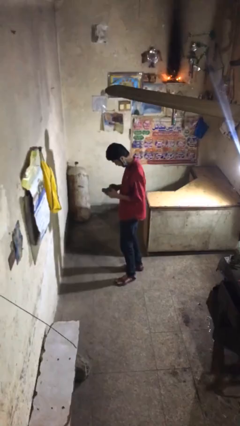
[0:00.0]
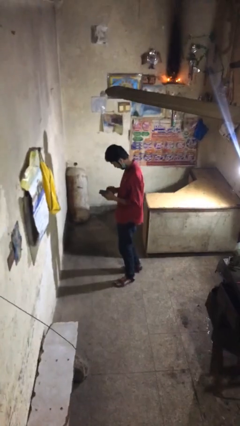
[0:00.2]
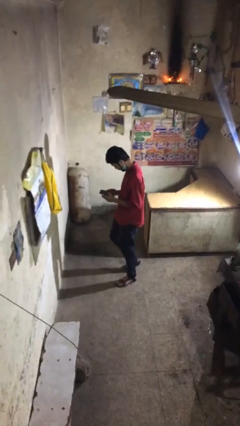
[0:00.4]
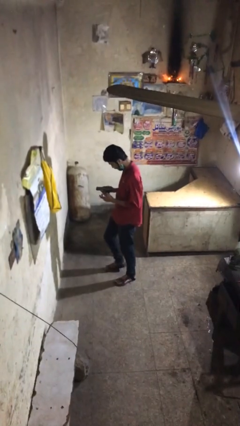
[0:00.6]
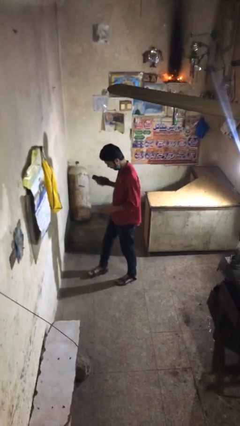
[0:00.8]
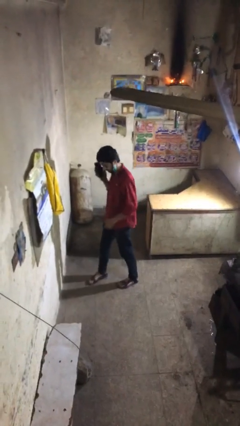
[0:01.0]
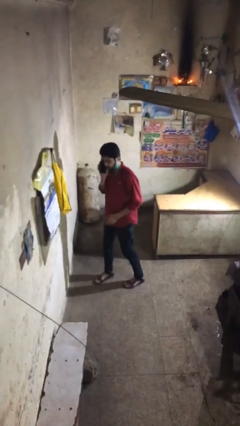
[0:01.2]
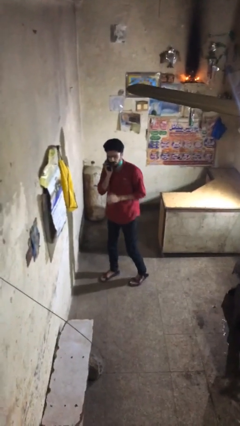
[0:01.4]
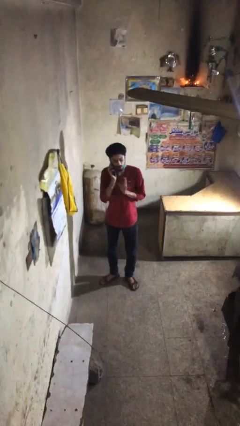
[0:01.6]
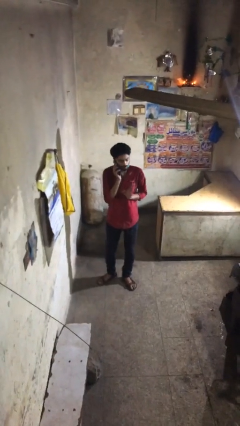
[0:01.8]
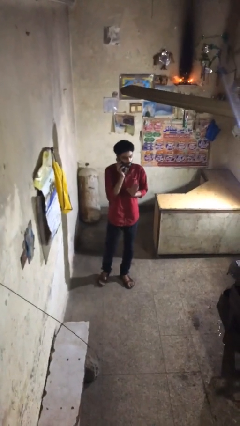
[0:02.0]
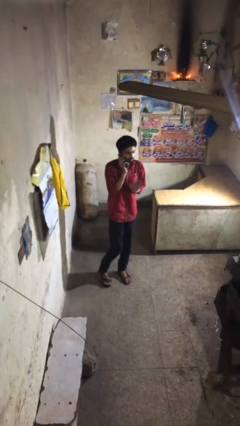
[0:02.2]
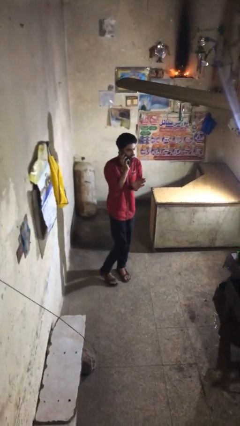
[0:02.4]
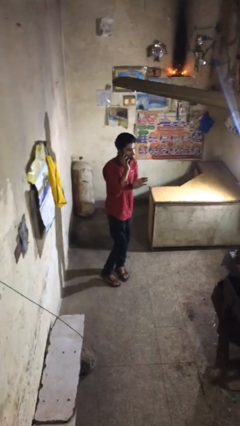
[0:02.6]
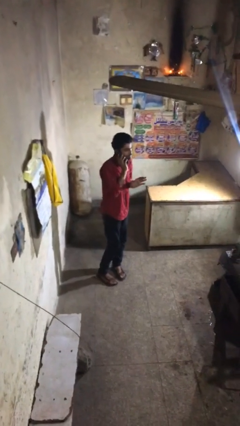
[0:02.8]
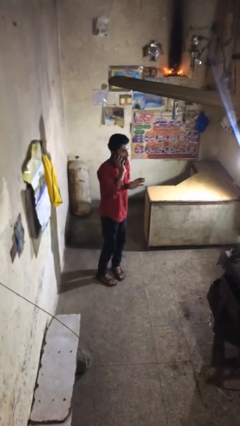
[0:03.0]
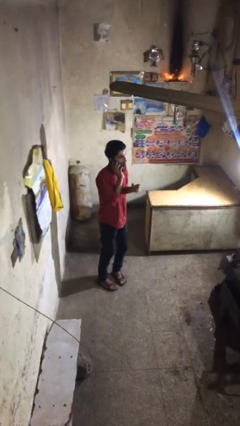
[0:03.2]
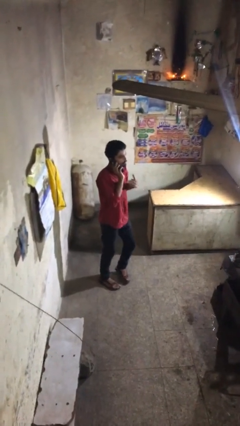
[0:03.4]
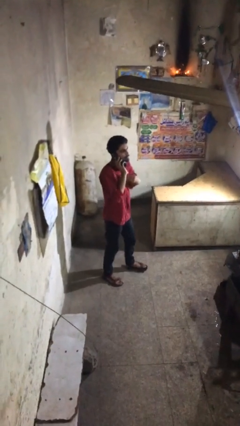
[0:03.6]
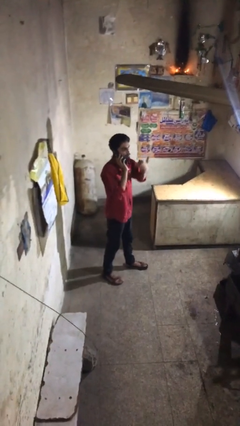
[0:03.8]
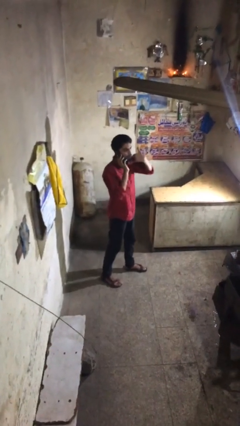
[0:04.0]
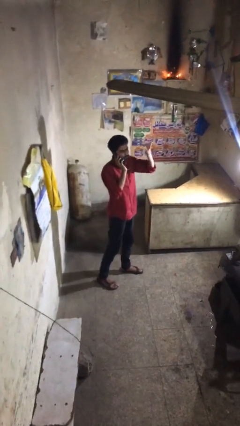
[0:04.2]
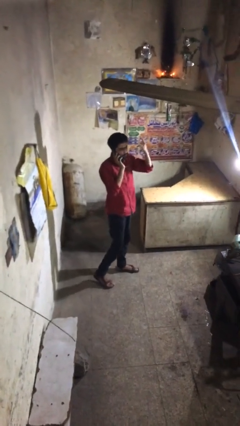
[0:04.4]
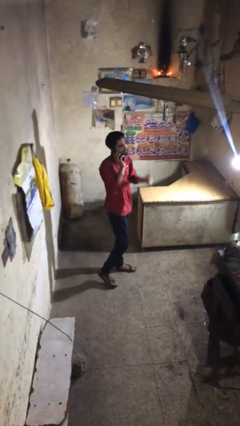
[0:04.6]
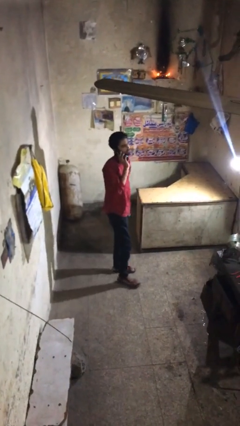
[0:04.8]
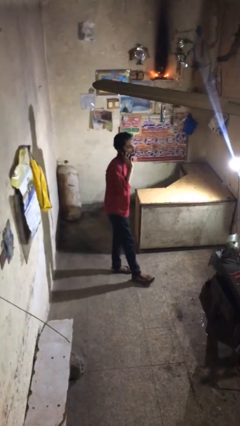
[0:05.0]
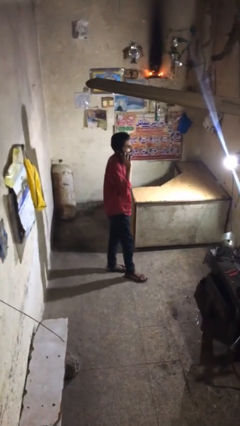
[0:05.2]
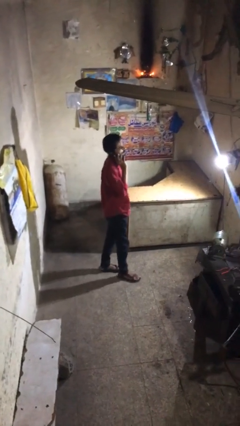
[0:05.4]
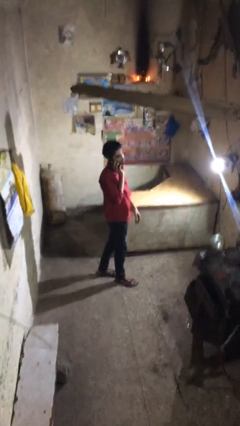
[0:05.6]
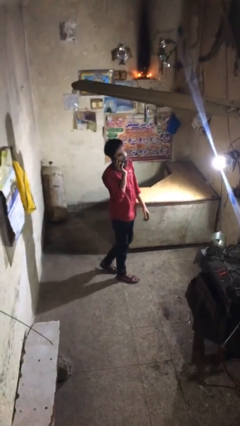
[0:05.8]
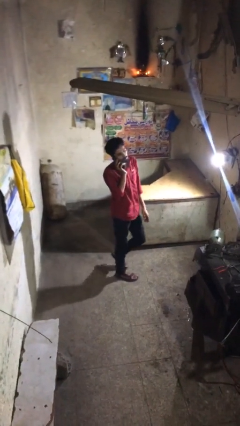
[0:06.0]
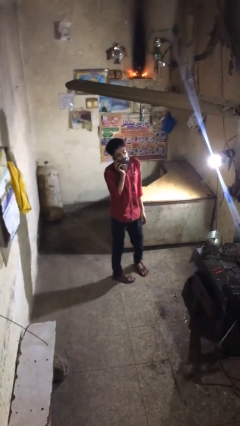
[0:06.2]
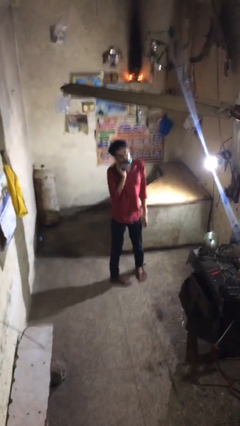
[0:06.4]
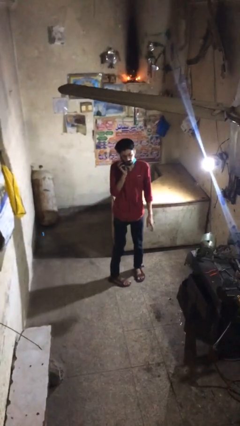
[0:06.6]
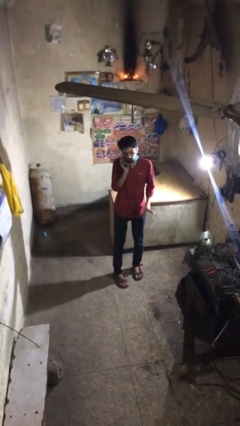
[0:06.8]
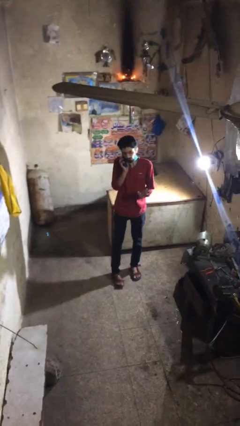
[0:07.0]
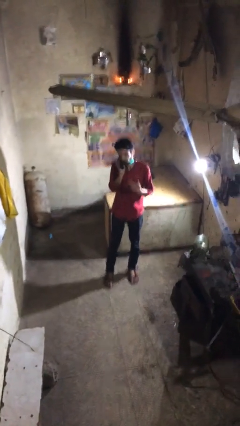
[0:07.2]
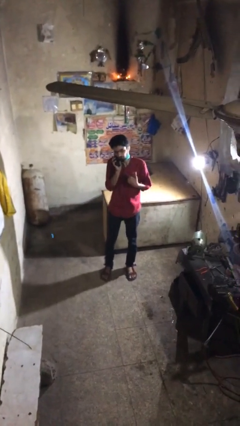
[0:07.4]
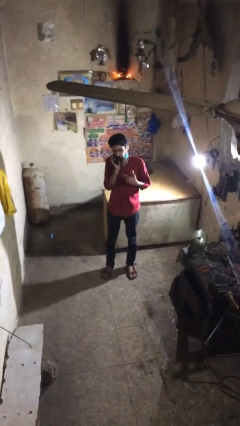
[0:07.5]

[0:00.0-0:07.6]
person talks on phone

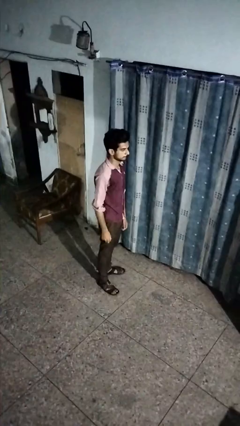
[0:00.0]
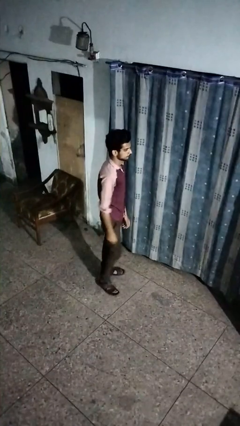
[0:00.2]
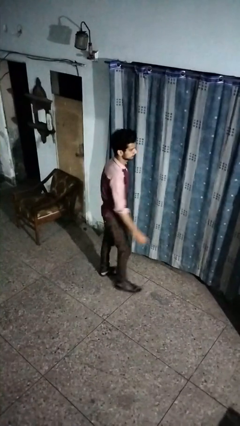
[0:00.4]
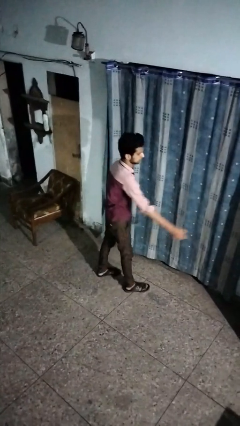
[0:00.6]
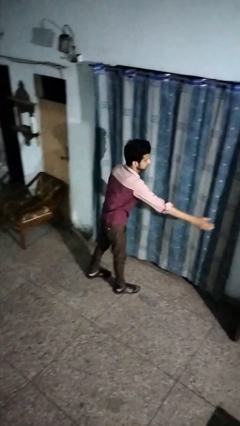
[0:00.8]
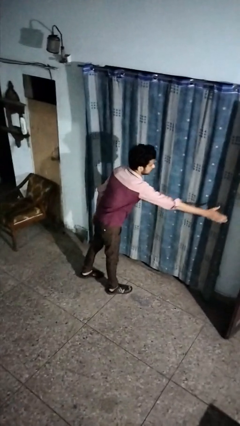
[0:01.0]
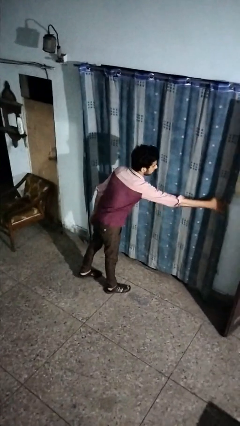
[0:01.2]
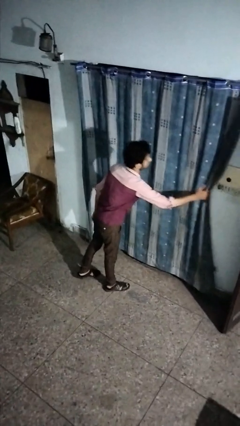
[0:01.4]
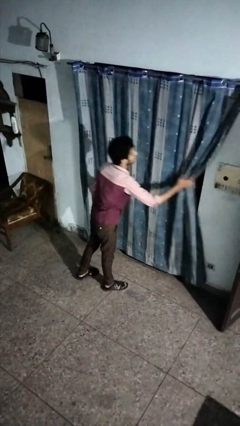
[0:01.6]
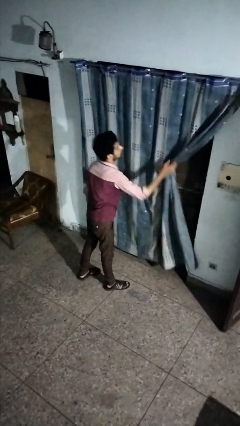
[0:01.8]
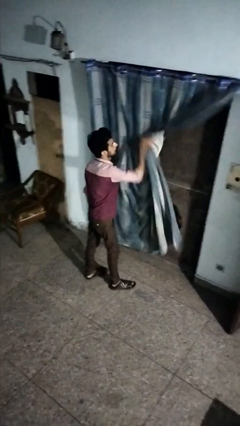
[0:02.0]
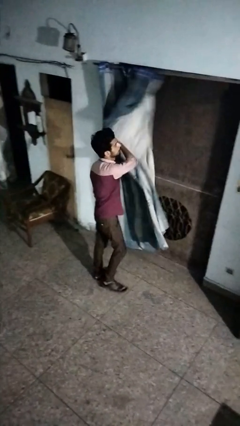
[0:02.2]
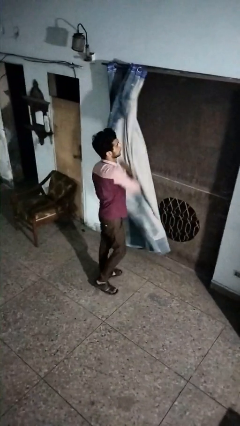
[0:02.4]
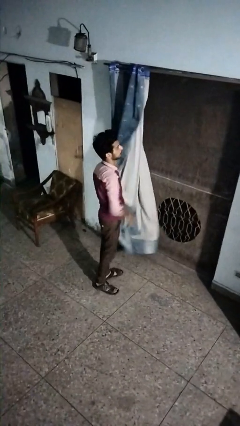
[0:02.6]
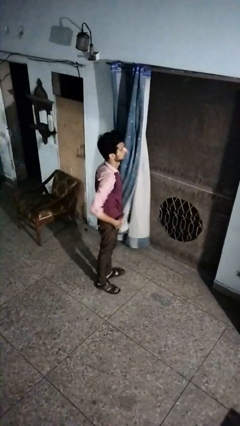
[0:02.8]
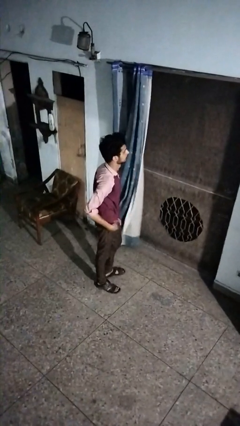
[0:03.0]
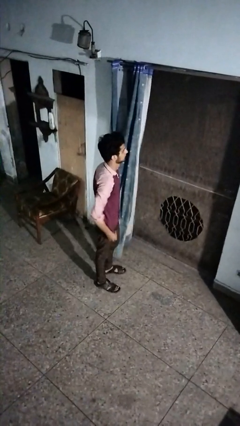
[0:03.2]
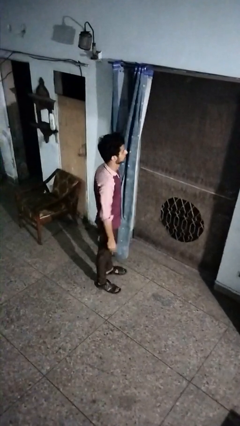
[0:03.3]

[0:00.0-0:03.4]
person opens curtains

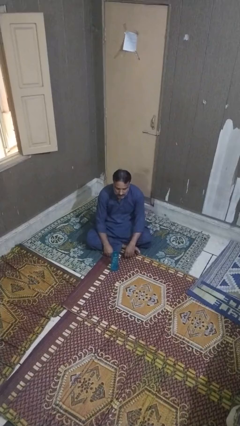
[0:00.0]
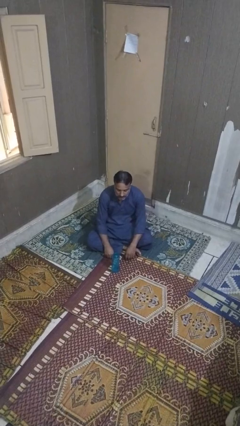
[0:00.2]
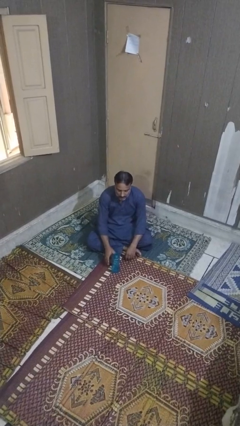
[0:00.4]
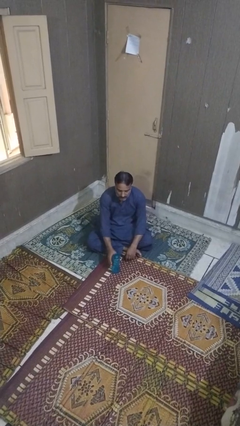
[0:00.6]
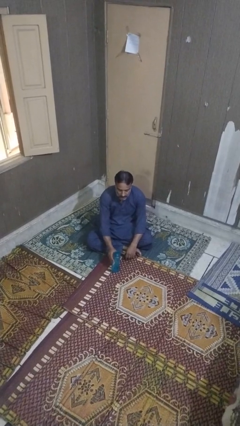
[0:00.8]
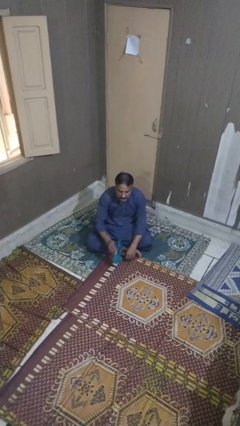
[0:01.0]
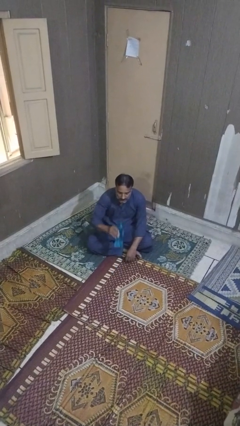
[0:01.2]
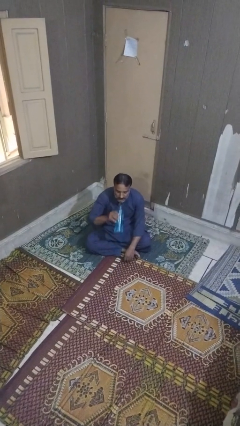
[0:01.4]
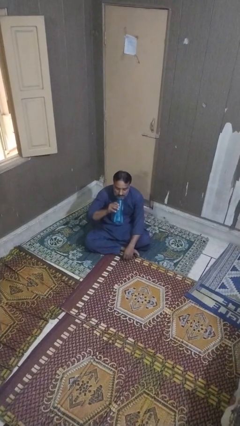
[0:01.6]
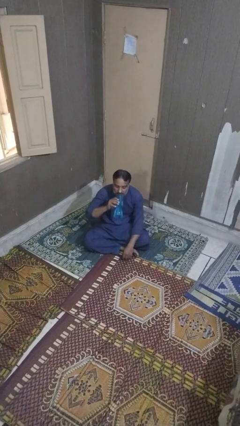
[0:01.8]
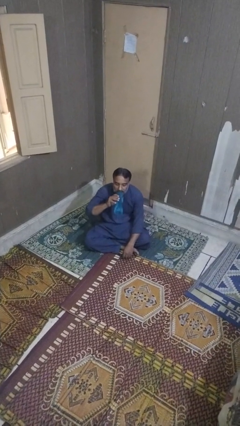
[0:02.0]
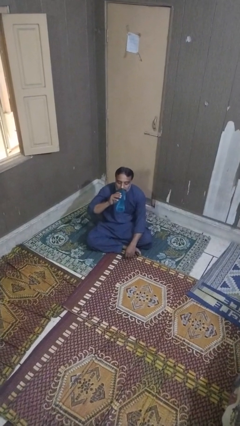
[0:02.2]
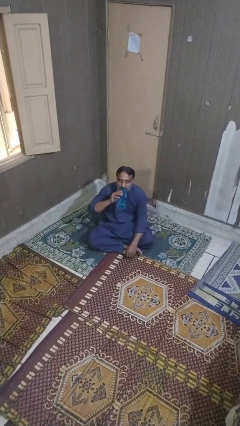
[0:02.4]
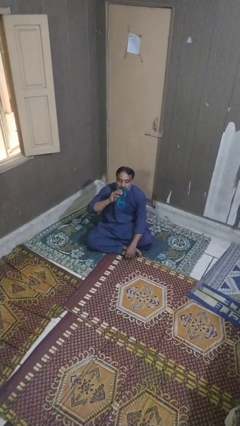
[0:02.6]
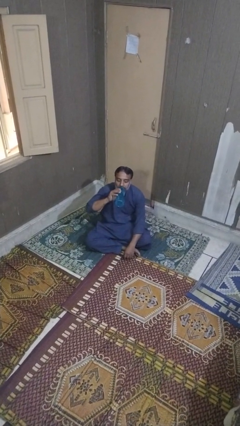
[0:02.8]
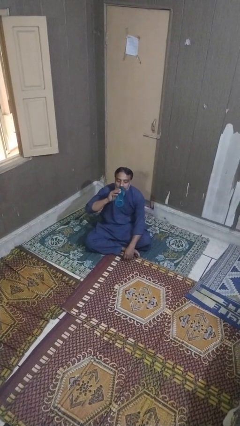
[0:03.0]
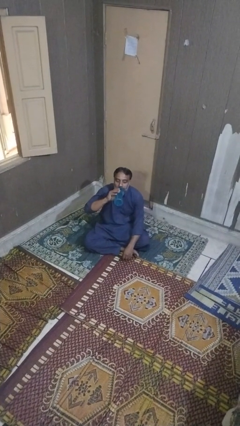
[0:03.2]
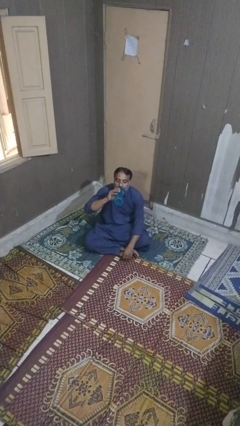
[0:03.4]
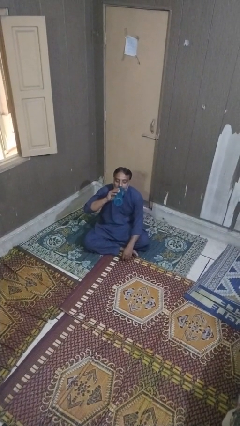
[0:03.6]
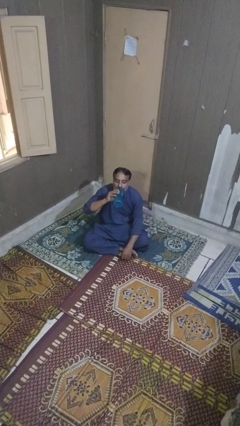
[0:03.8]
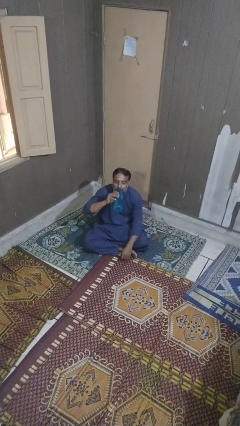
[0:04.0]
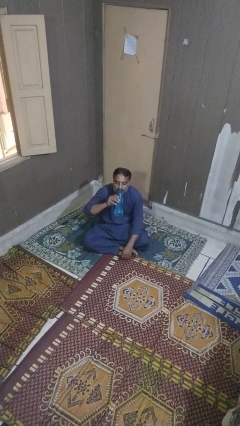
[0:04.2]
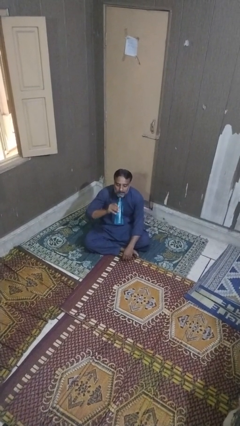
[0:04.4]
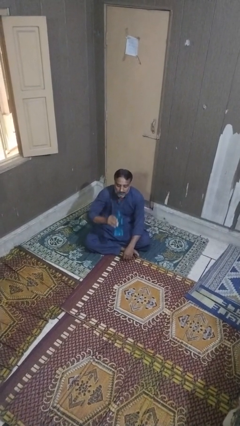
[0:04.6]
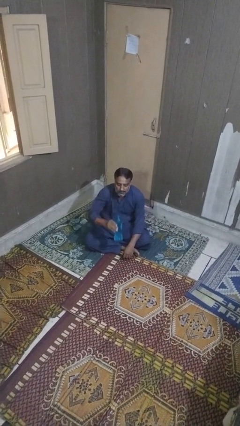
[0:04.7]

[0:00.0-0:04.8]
person drinks from bottle

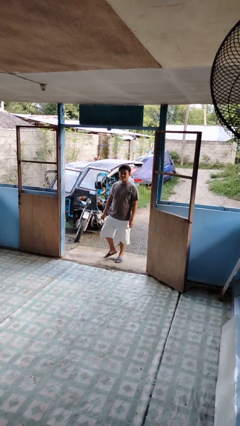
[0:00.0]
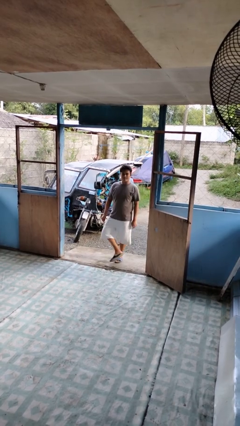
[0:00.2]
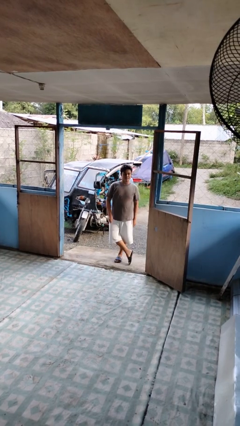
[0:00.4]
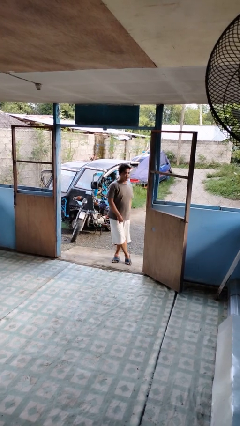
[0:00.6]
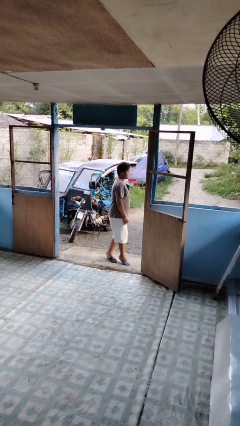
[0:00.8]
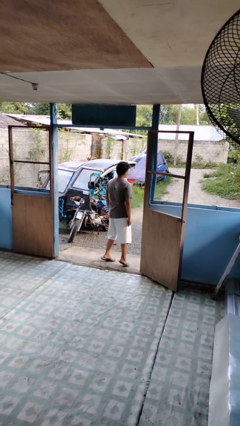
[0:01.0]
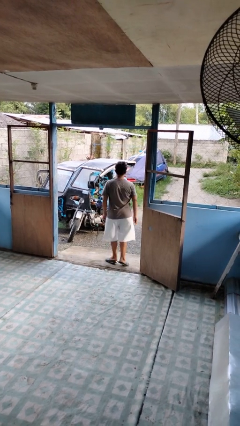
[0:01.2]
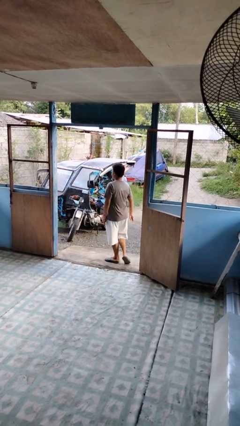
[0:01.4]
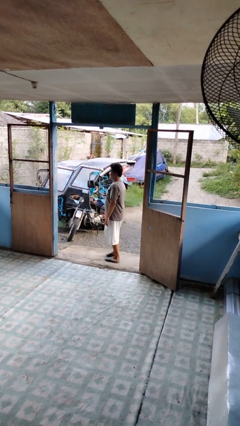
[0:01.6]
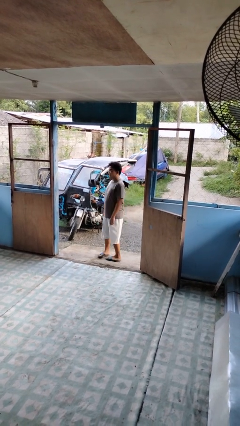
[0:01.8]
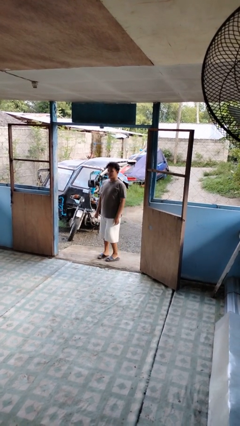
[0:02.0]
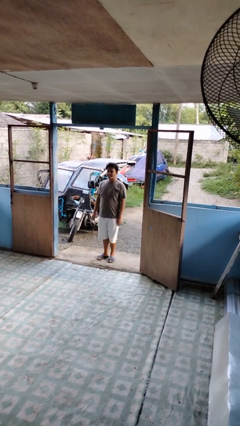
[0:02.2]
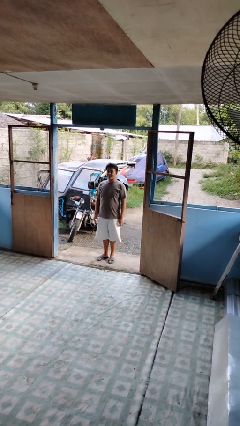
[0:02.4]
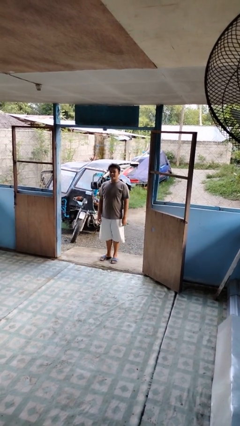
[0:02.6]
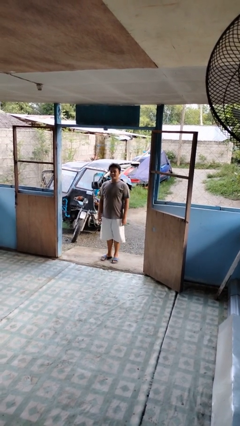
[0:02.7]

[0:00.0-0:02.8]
person twirls
